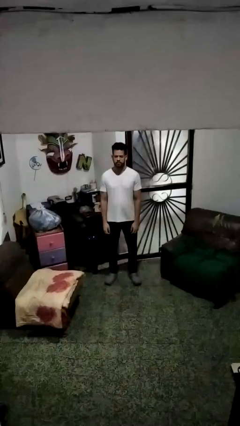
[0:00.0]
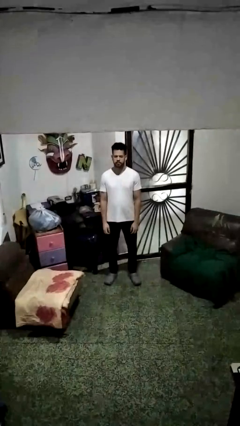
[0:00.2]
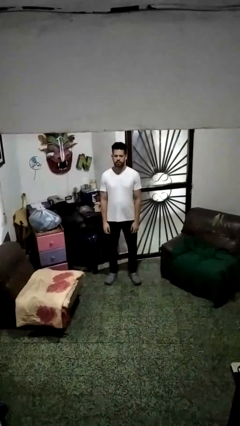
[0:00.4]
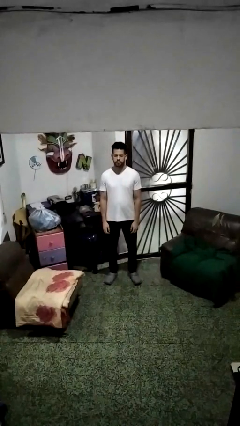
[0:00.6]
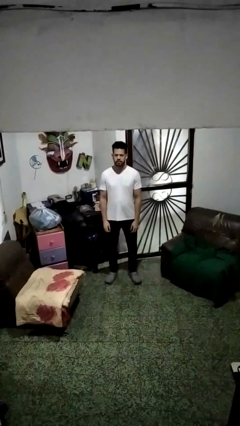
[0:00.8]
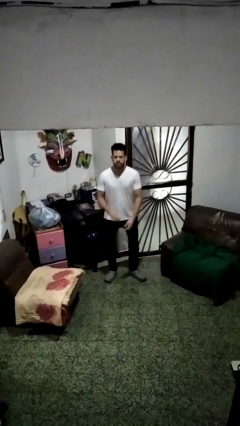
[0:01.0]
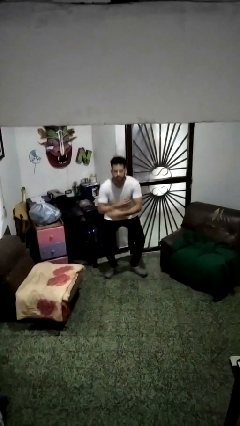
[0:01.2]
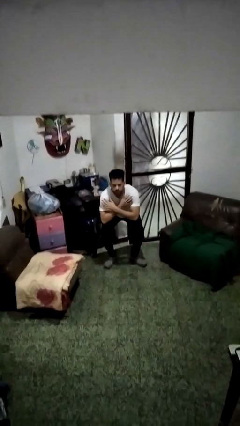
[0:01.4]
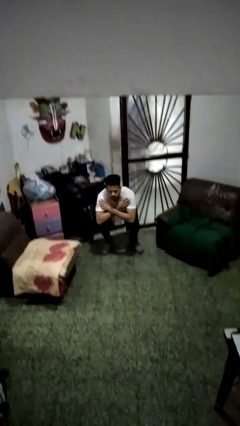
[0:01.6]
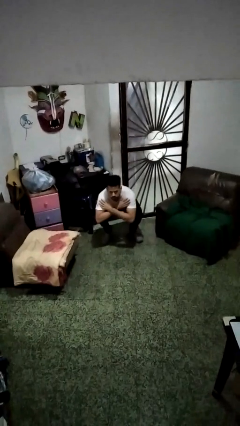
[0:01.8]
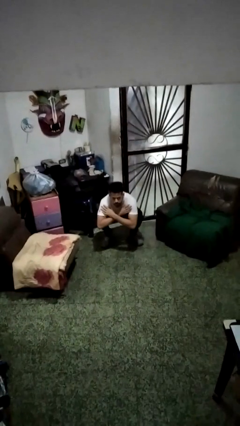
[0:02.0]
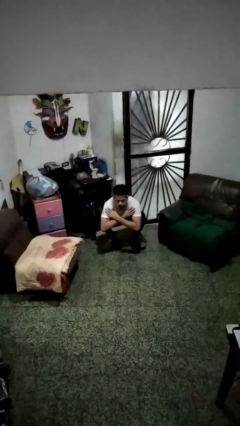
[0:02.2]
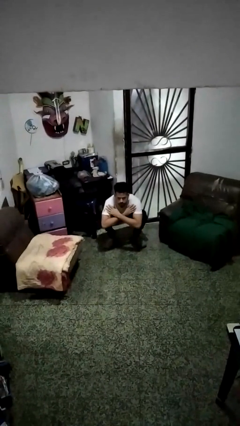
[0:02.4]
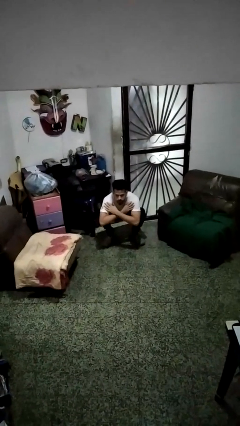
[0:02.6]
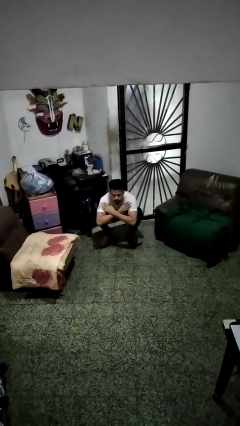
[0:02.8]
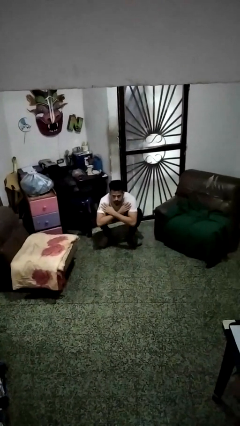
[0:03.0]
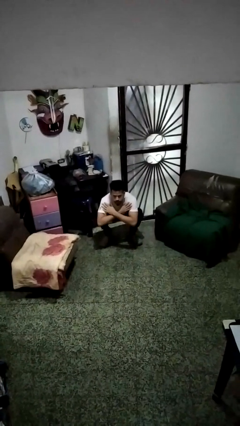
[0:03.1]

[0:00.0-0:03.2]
person squats

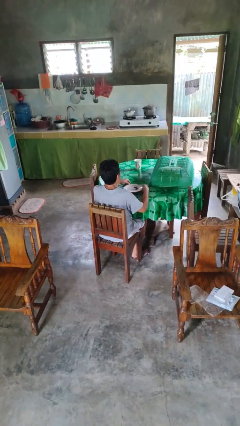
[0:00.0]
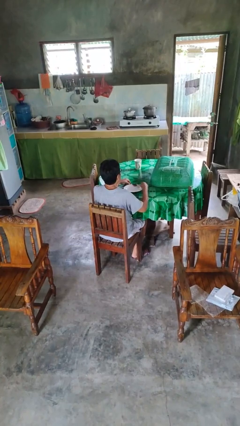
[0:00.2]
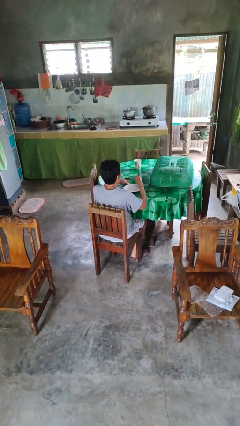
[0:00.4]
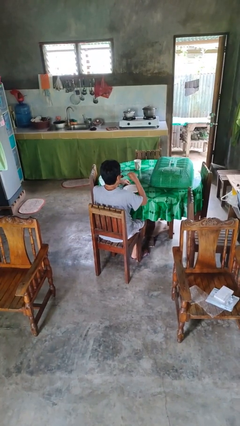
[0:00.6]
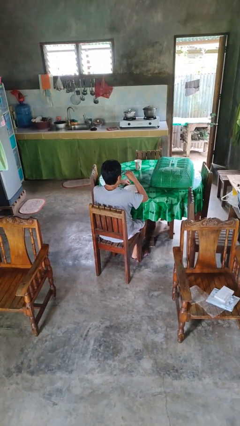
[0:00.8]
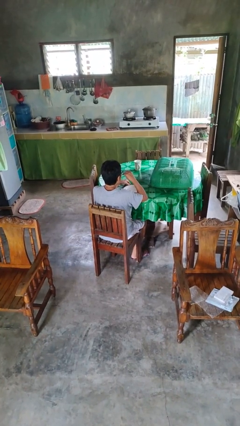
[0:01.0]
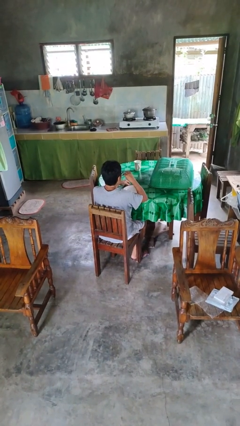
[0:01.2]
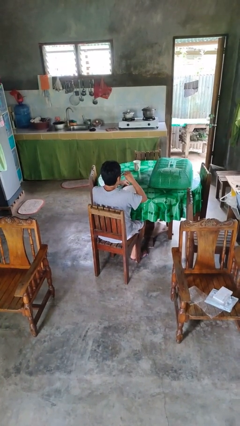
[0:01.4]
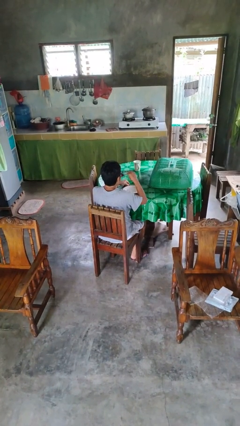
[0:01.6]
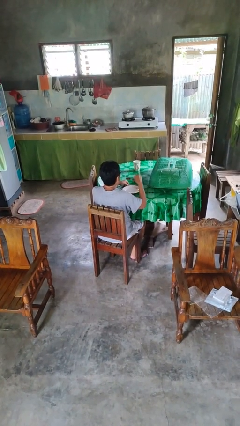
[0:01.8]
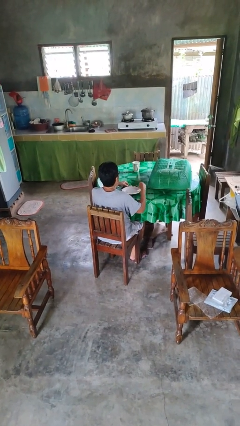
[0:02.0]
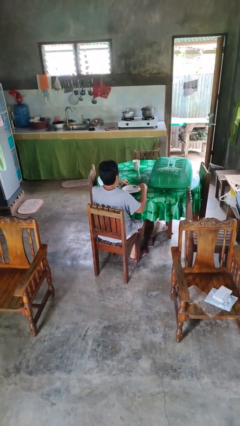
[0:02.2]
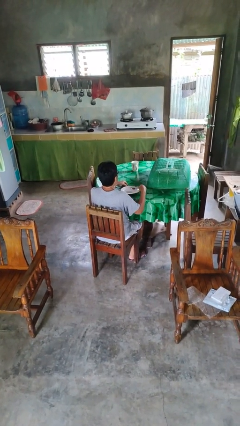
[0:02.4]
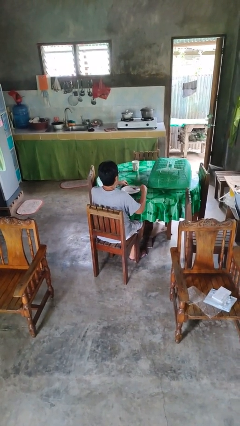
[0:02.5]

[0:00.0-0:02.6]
person eats with utensil

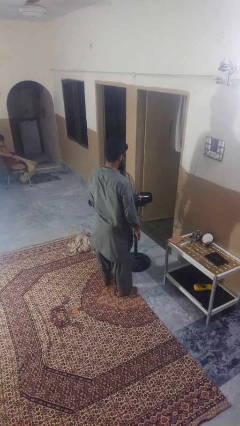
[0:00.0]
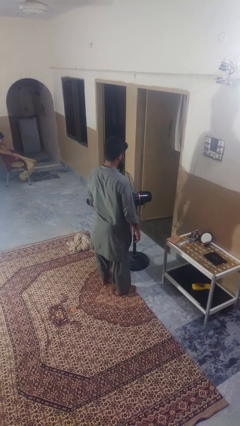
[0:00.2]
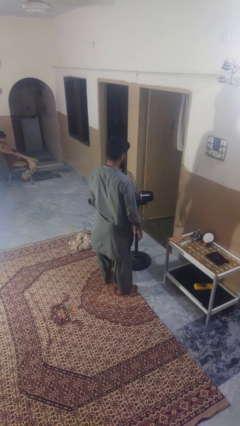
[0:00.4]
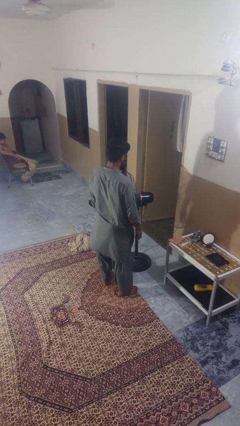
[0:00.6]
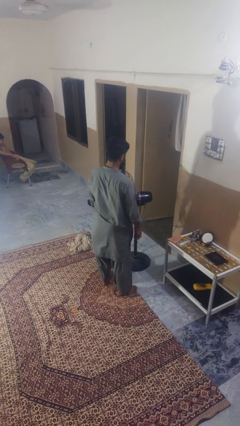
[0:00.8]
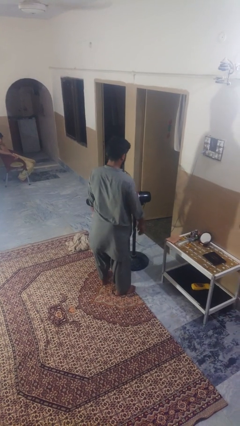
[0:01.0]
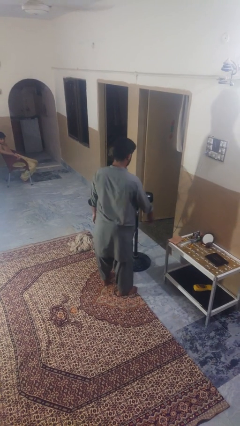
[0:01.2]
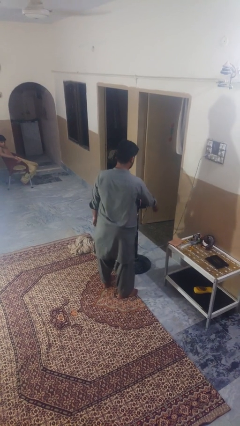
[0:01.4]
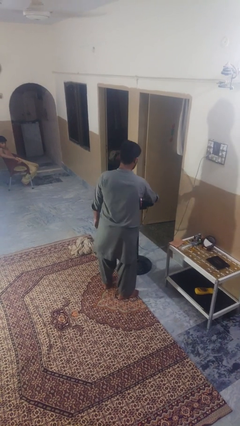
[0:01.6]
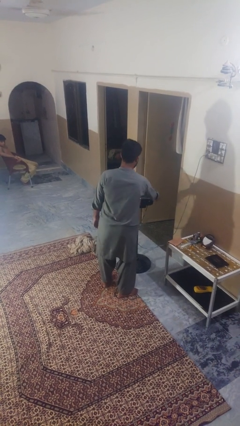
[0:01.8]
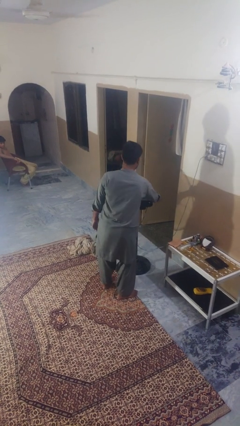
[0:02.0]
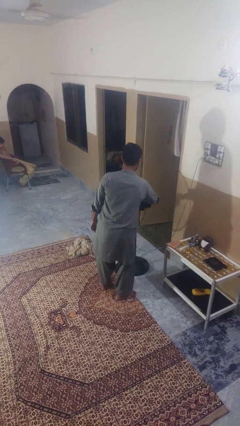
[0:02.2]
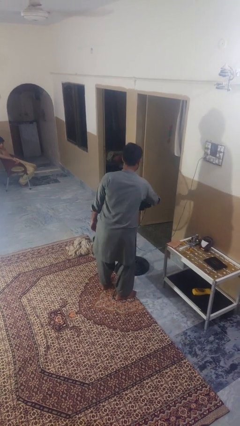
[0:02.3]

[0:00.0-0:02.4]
person turns off fan

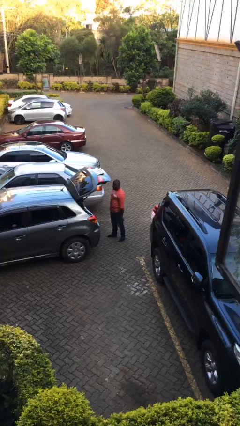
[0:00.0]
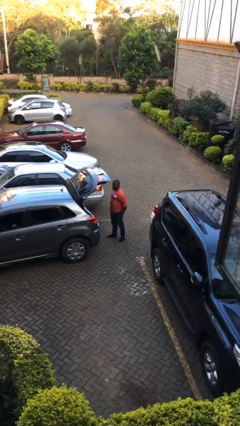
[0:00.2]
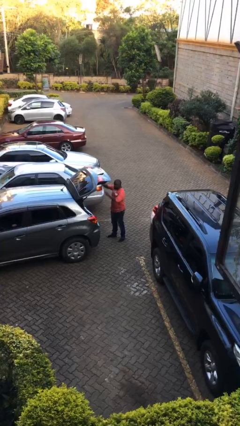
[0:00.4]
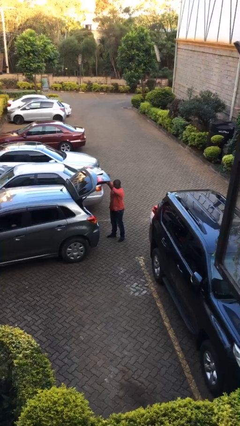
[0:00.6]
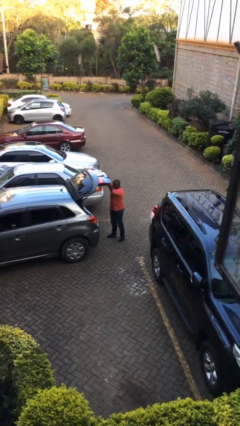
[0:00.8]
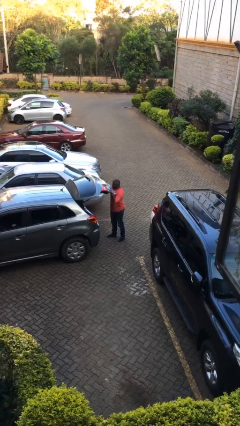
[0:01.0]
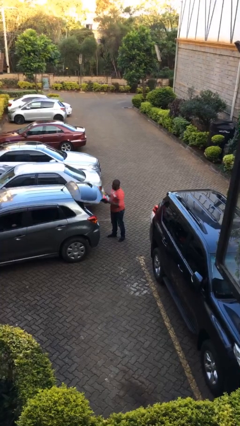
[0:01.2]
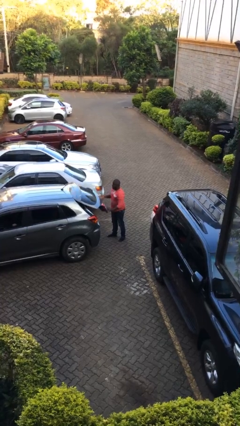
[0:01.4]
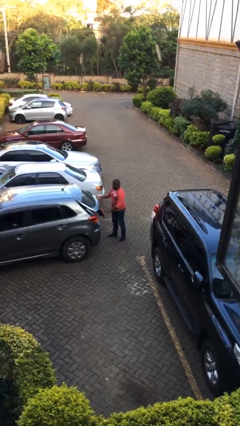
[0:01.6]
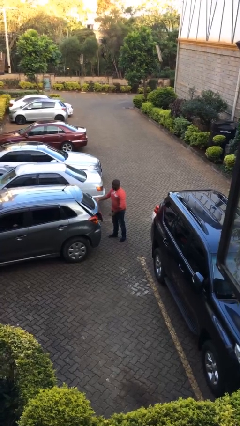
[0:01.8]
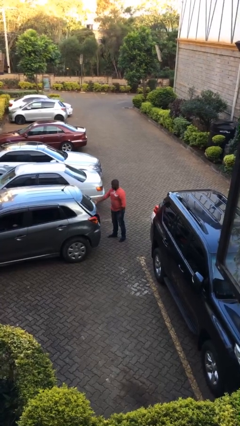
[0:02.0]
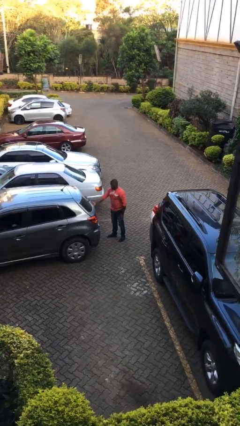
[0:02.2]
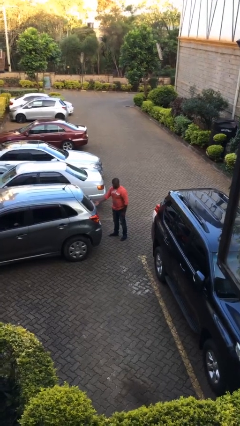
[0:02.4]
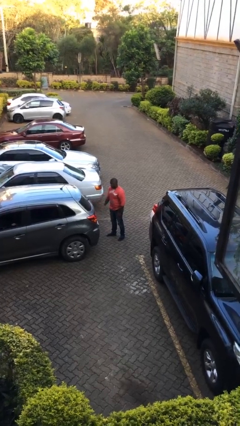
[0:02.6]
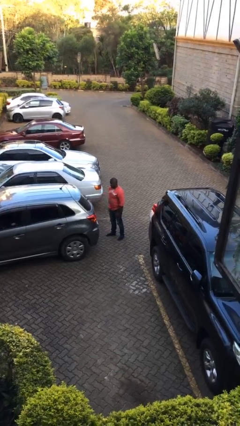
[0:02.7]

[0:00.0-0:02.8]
person closes car trunk

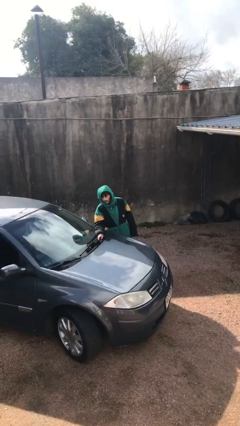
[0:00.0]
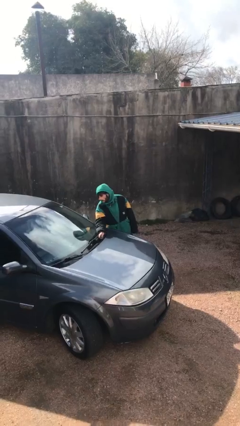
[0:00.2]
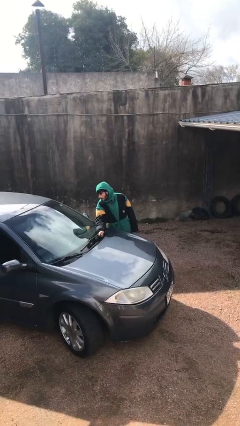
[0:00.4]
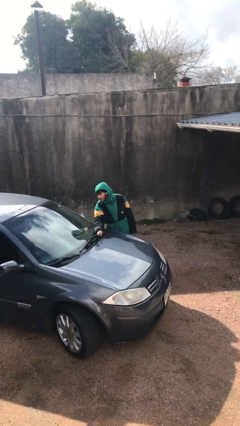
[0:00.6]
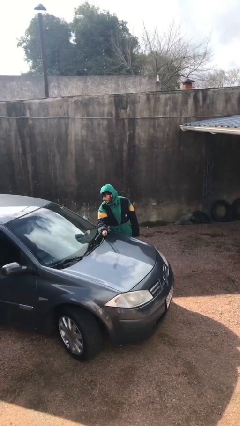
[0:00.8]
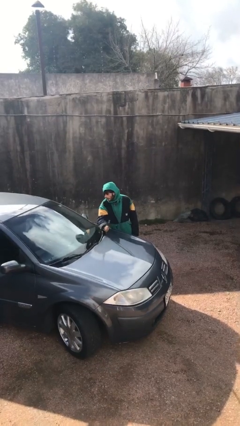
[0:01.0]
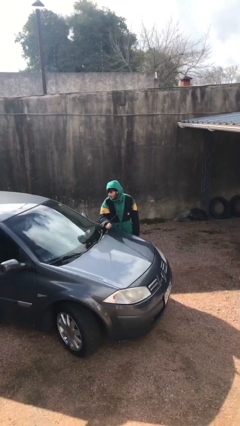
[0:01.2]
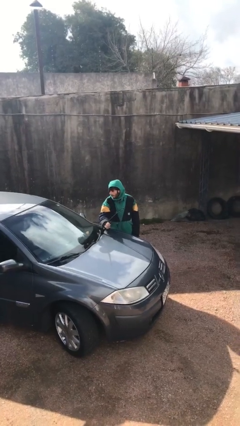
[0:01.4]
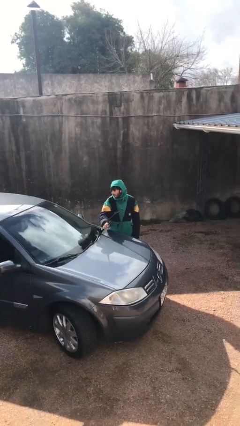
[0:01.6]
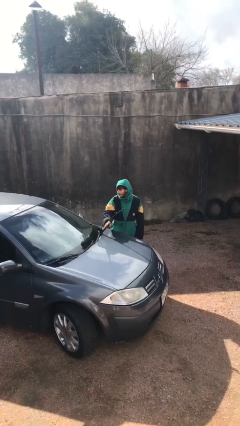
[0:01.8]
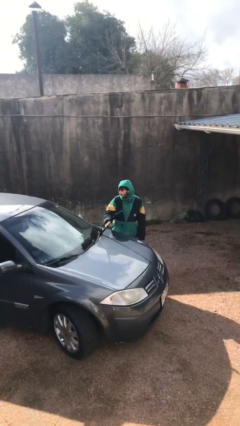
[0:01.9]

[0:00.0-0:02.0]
person flips up car wipers

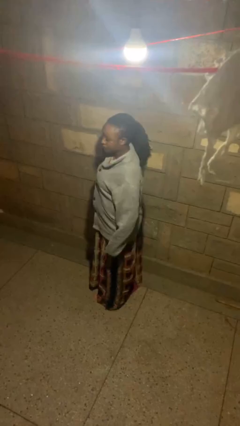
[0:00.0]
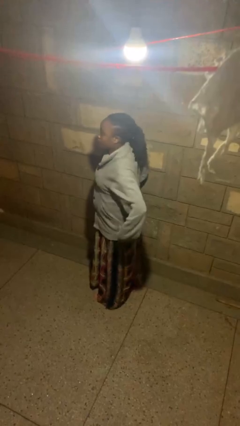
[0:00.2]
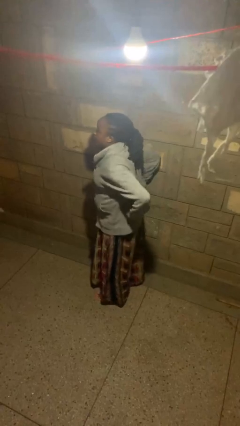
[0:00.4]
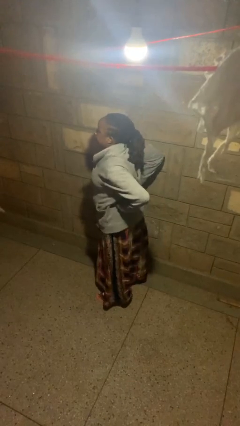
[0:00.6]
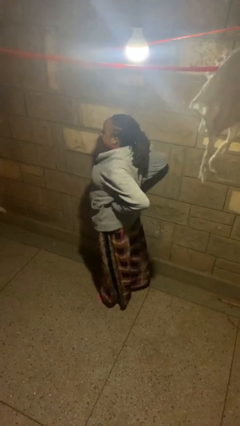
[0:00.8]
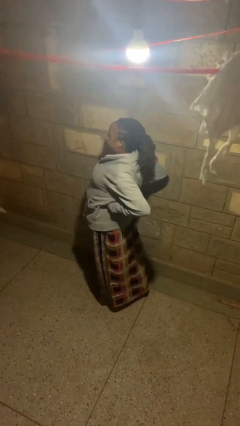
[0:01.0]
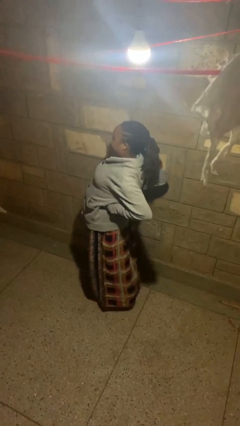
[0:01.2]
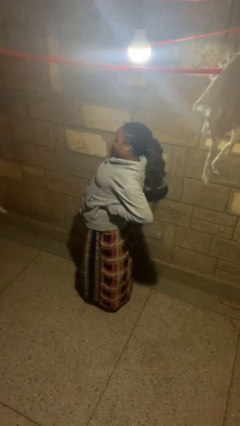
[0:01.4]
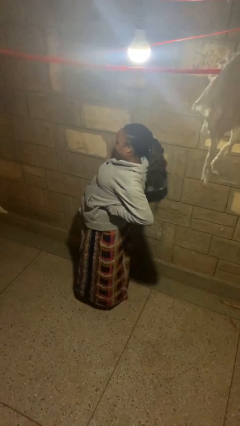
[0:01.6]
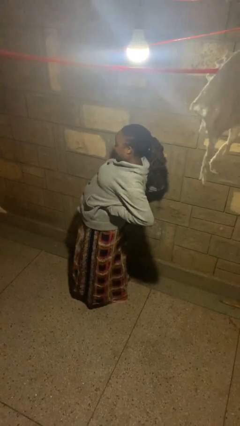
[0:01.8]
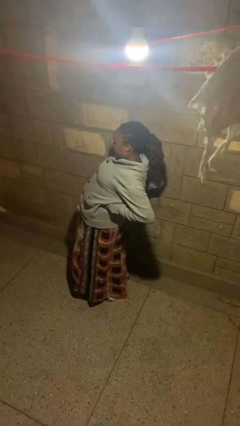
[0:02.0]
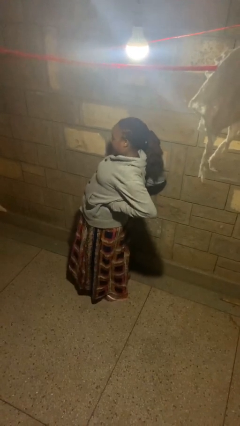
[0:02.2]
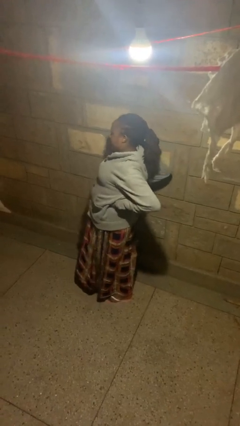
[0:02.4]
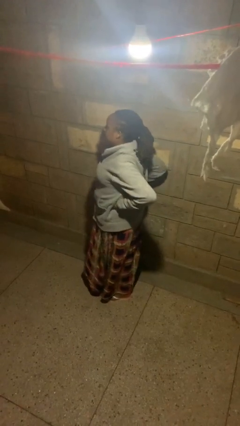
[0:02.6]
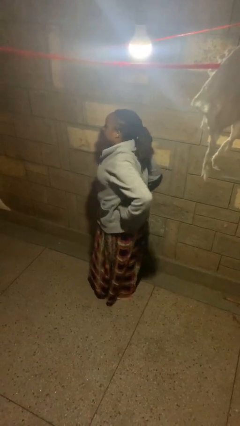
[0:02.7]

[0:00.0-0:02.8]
person stretches back

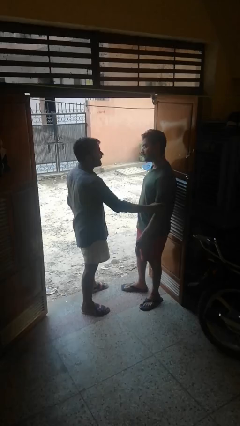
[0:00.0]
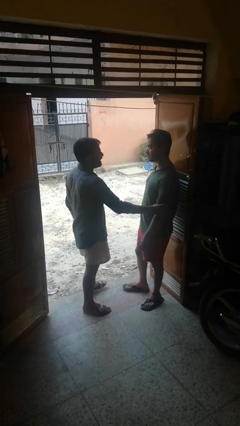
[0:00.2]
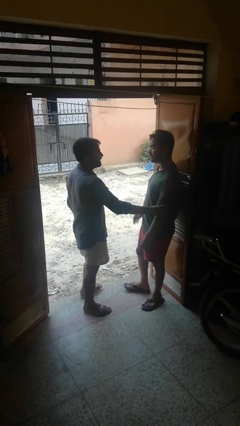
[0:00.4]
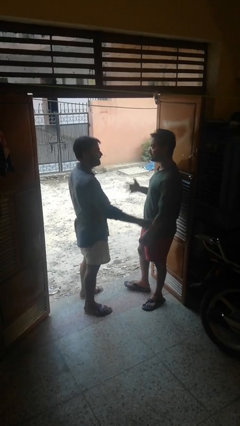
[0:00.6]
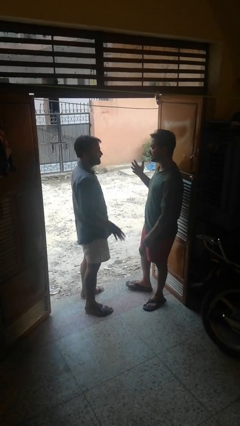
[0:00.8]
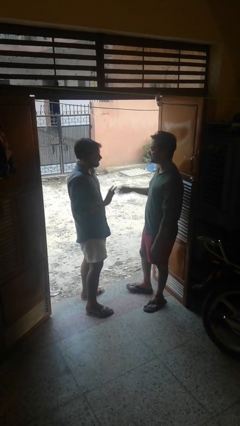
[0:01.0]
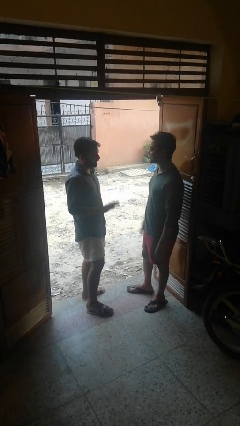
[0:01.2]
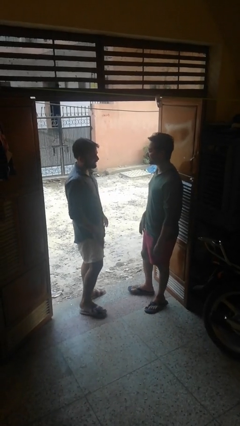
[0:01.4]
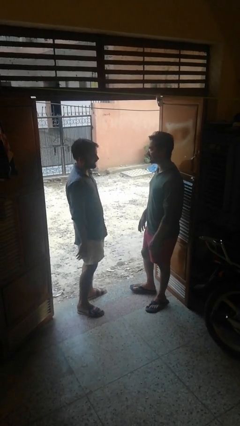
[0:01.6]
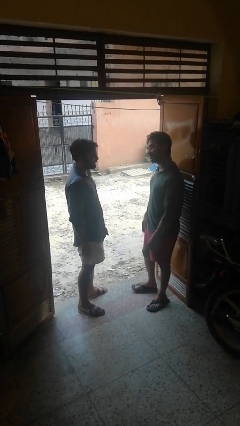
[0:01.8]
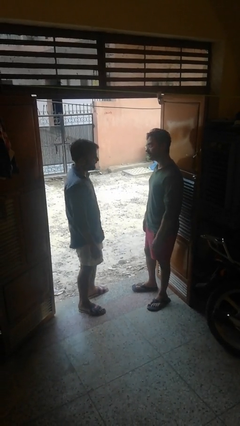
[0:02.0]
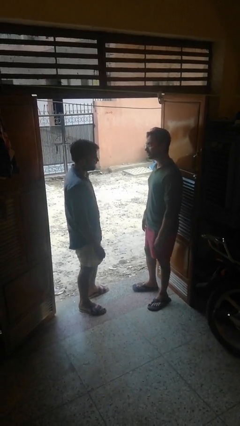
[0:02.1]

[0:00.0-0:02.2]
person highfives hand
